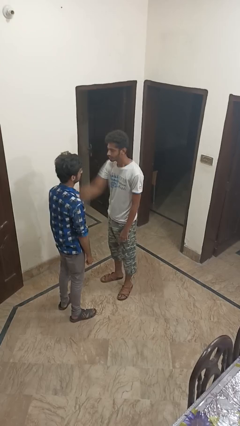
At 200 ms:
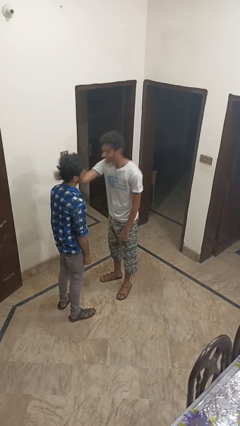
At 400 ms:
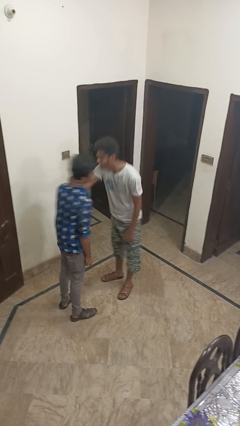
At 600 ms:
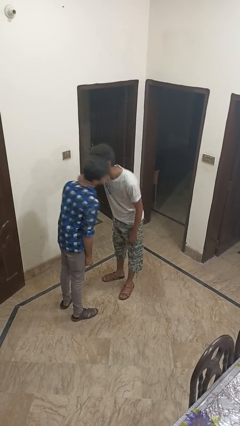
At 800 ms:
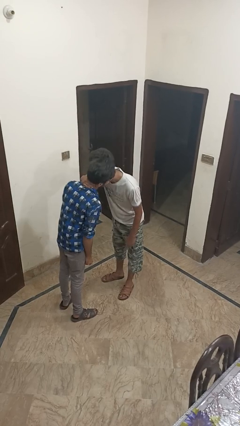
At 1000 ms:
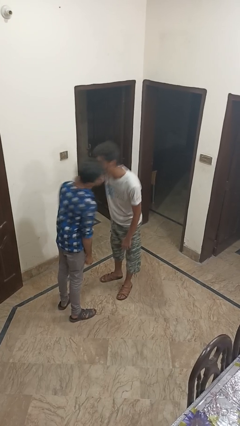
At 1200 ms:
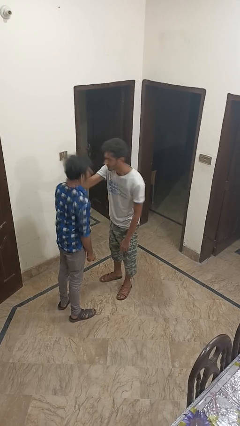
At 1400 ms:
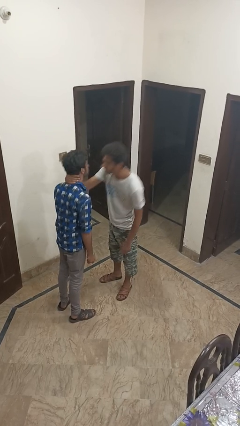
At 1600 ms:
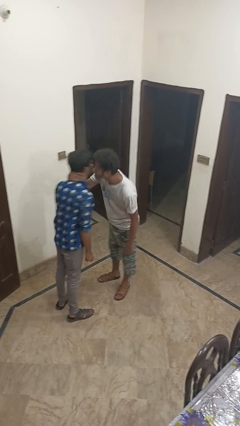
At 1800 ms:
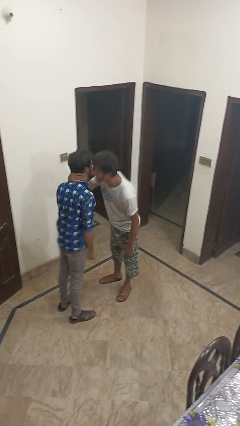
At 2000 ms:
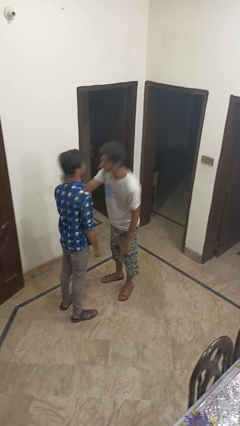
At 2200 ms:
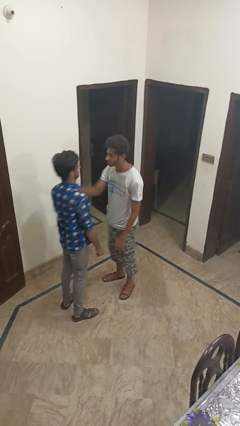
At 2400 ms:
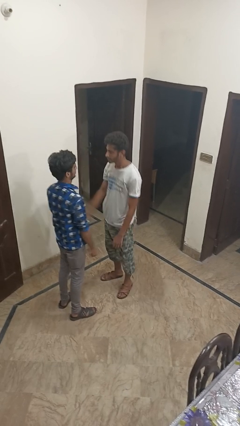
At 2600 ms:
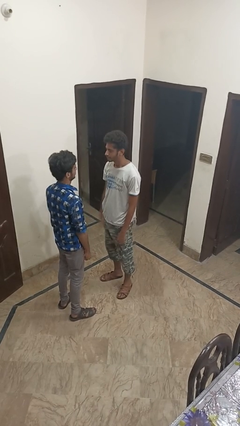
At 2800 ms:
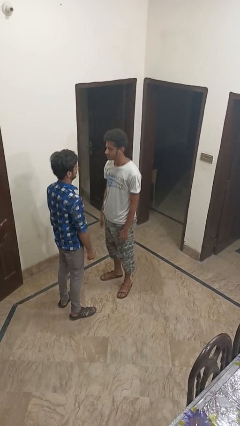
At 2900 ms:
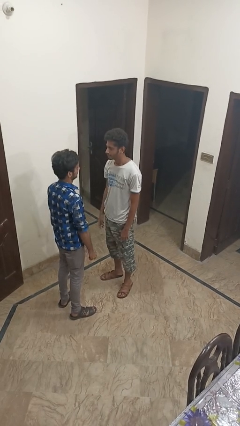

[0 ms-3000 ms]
person kisses cheek of person

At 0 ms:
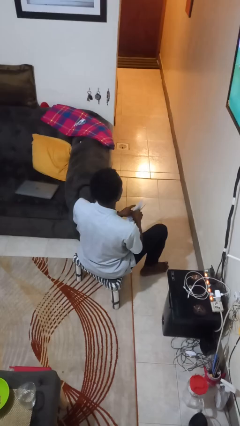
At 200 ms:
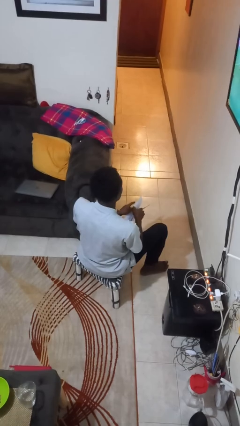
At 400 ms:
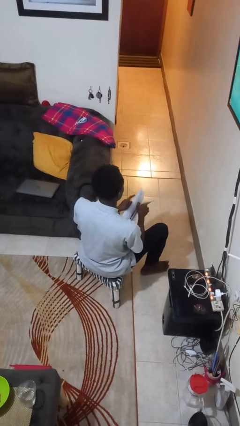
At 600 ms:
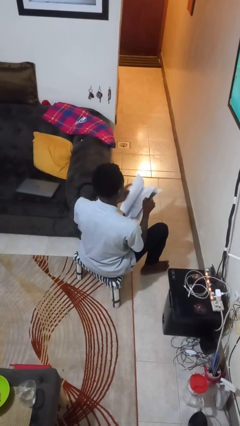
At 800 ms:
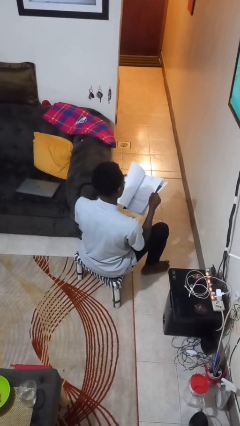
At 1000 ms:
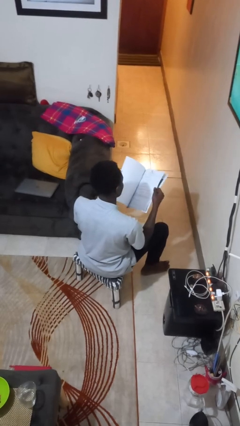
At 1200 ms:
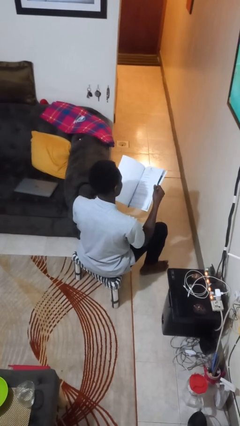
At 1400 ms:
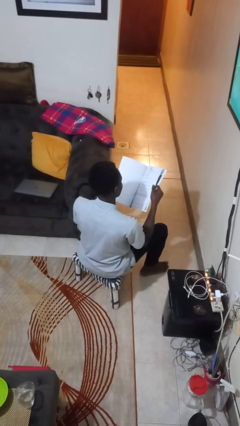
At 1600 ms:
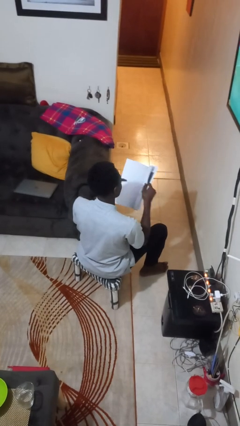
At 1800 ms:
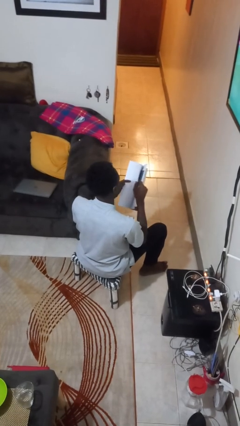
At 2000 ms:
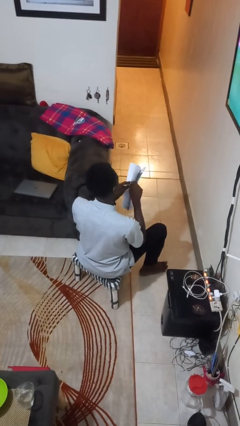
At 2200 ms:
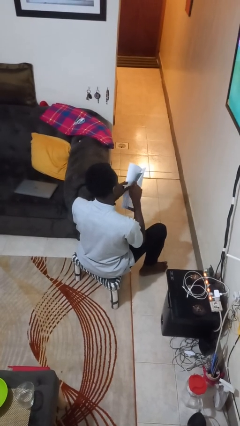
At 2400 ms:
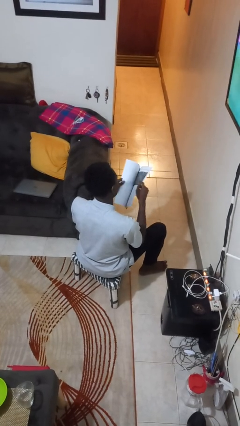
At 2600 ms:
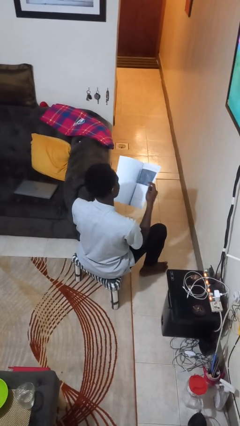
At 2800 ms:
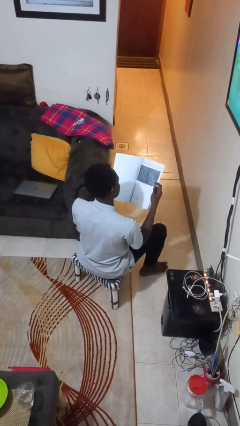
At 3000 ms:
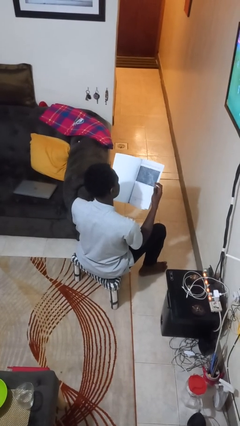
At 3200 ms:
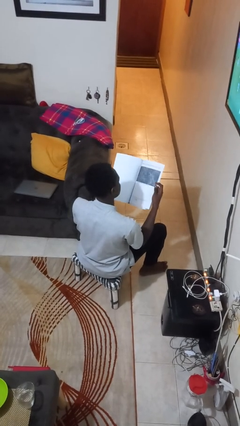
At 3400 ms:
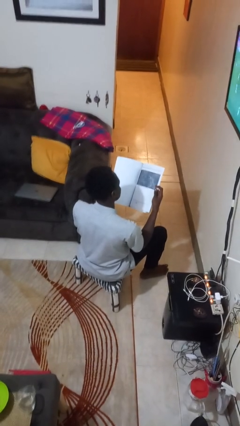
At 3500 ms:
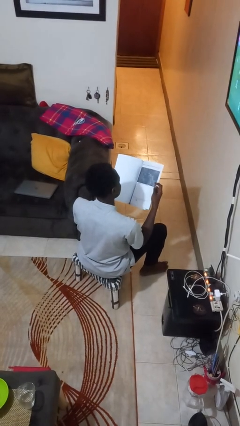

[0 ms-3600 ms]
person reads magazine

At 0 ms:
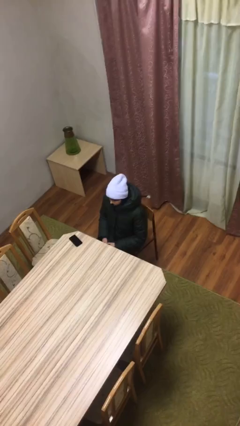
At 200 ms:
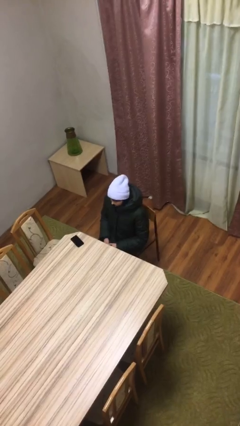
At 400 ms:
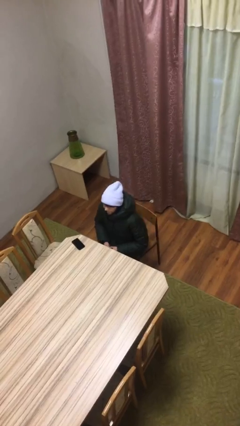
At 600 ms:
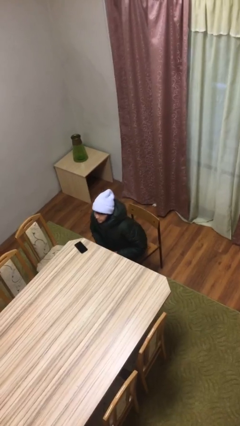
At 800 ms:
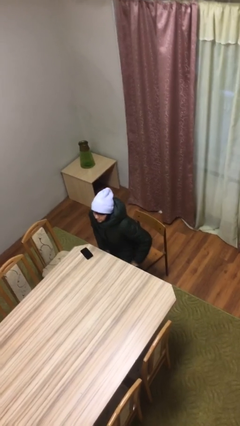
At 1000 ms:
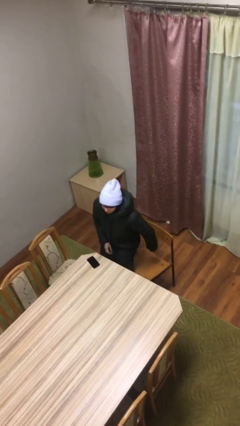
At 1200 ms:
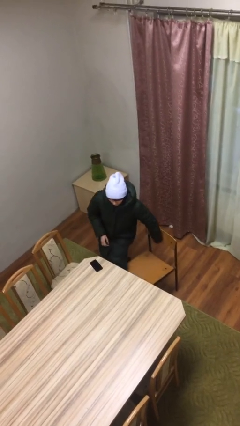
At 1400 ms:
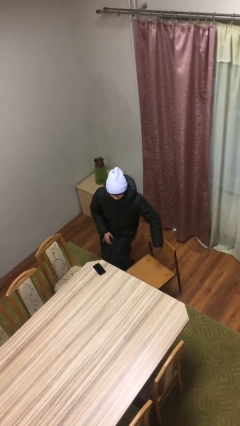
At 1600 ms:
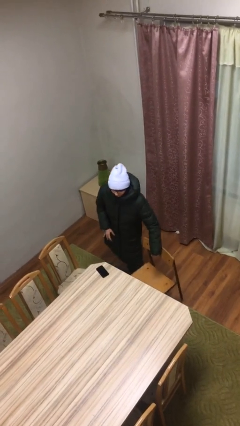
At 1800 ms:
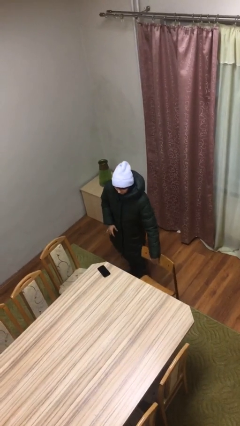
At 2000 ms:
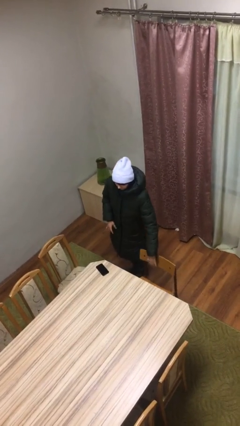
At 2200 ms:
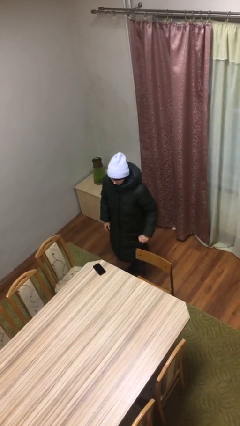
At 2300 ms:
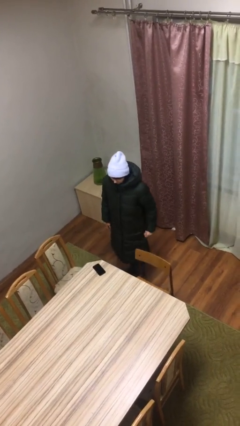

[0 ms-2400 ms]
person stands up

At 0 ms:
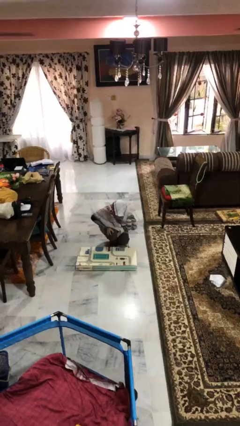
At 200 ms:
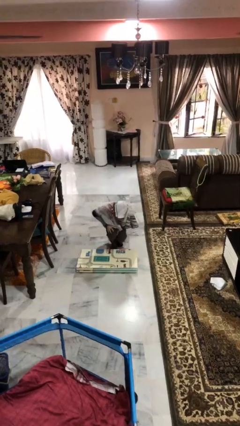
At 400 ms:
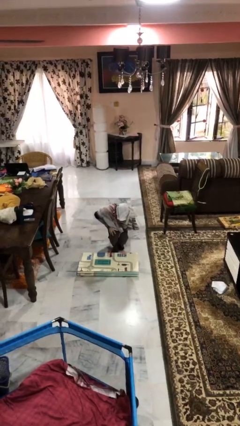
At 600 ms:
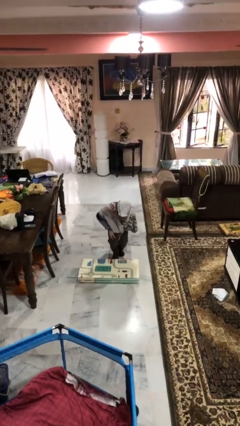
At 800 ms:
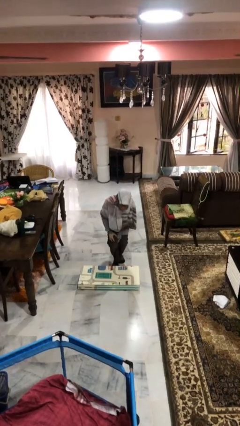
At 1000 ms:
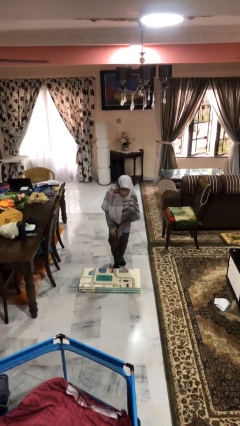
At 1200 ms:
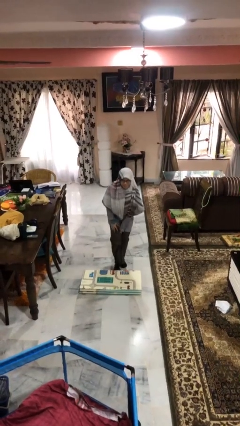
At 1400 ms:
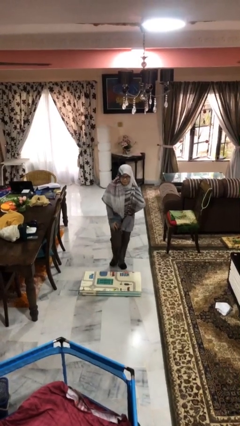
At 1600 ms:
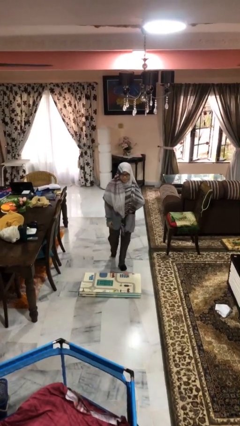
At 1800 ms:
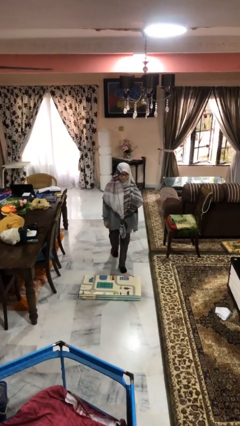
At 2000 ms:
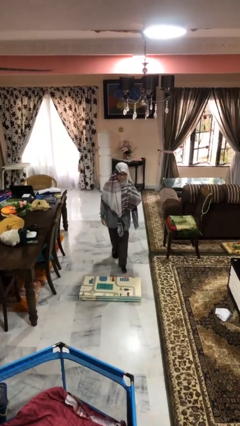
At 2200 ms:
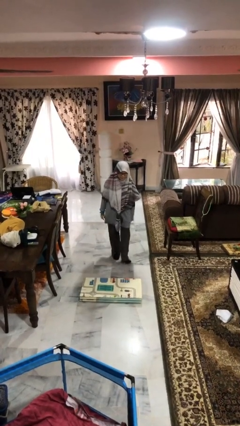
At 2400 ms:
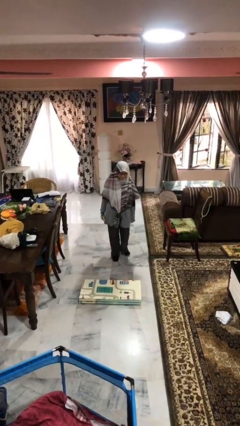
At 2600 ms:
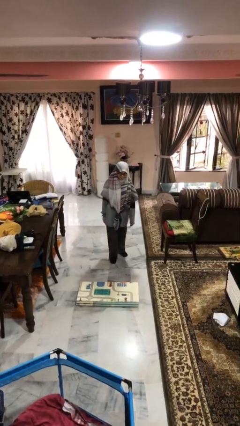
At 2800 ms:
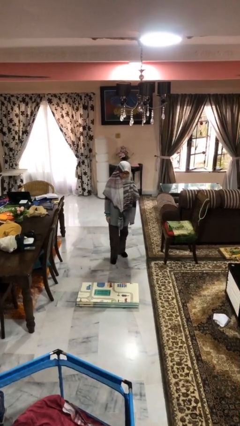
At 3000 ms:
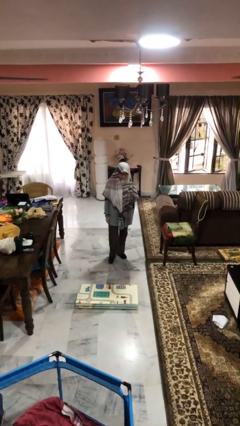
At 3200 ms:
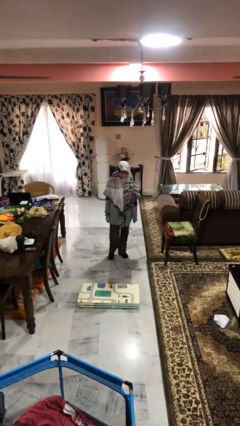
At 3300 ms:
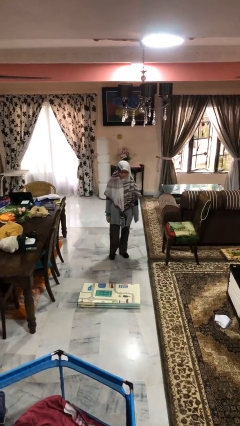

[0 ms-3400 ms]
person stands up from floor

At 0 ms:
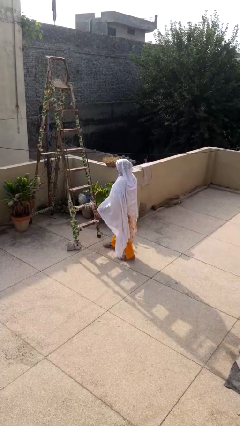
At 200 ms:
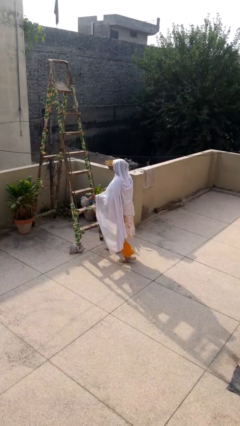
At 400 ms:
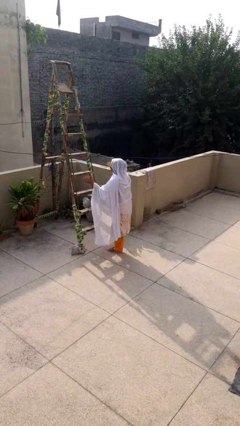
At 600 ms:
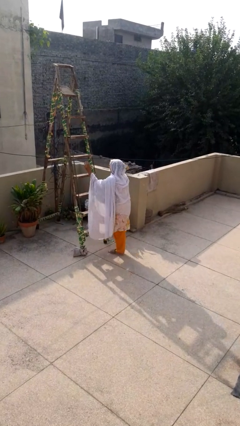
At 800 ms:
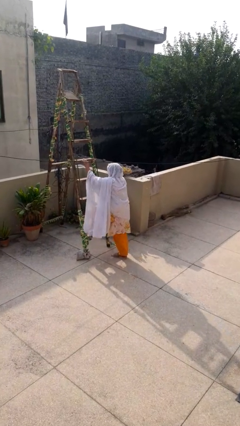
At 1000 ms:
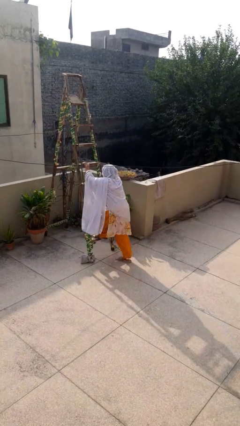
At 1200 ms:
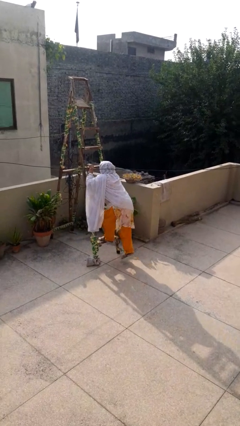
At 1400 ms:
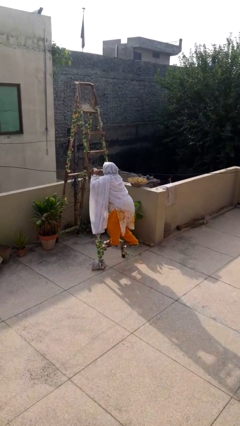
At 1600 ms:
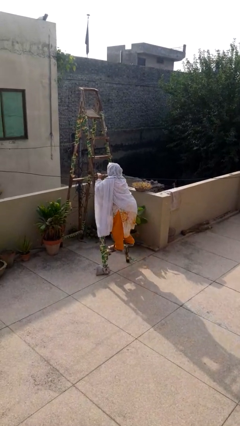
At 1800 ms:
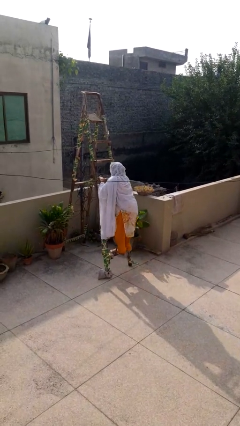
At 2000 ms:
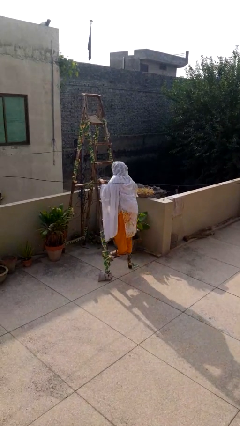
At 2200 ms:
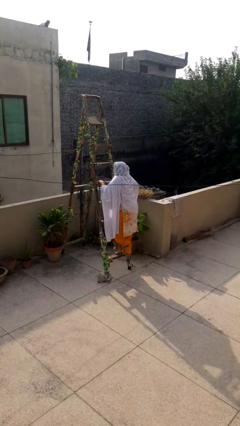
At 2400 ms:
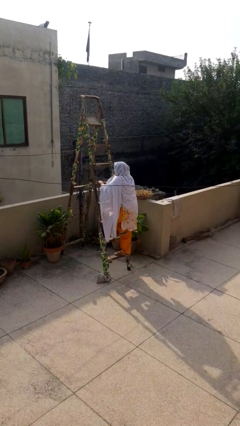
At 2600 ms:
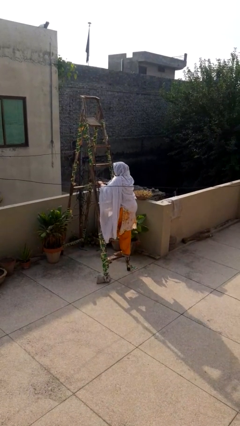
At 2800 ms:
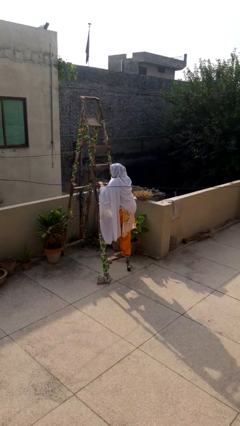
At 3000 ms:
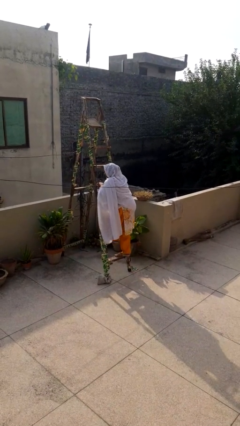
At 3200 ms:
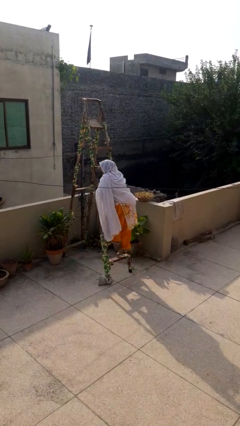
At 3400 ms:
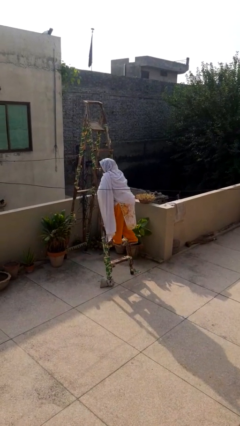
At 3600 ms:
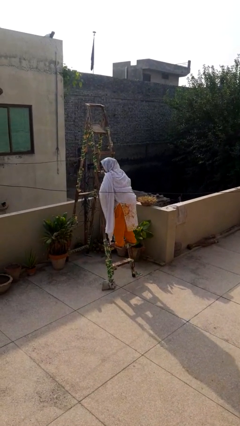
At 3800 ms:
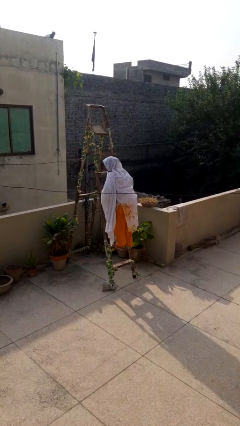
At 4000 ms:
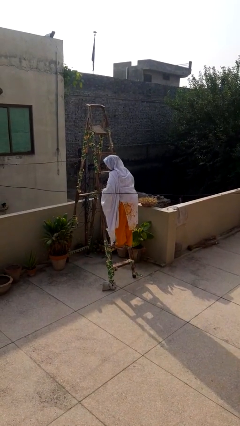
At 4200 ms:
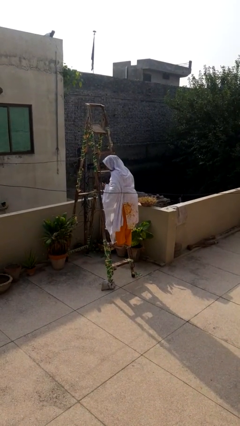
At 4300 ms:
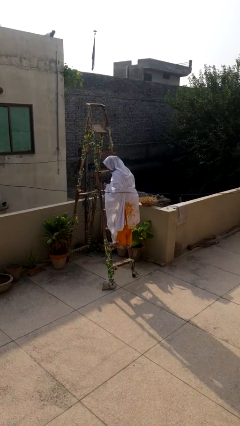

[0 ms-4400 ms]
person climbs up ladder

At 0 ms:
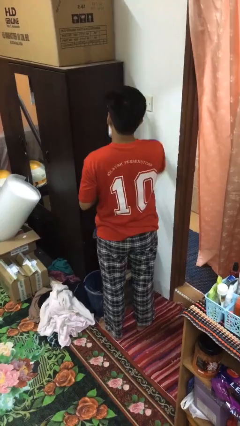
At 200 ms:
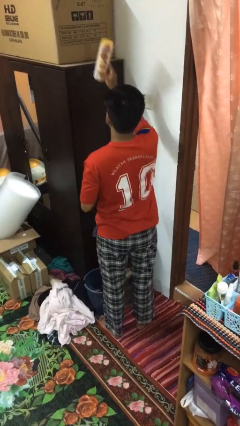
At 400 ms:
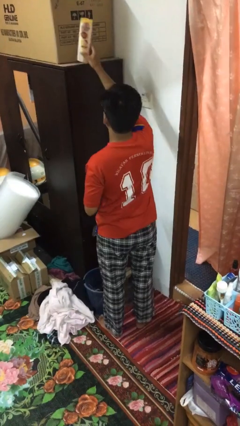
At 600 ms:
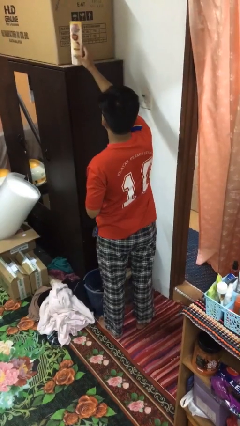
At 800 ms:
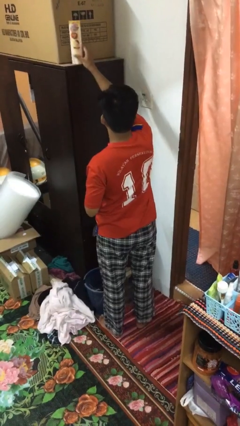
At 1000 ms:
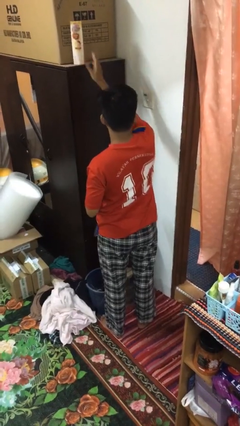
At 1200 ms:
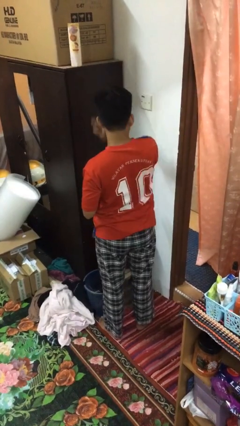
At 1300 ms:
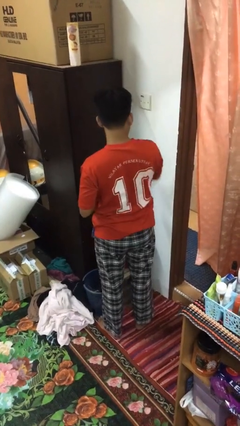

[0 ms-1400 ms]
person puts down object on shelf
